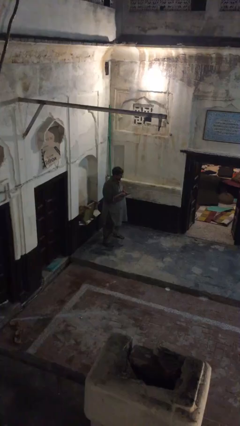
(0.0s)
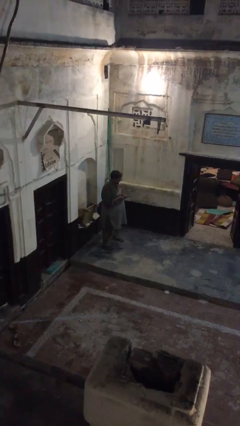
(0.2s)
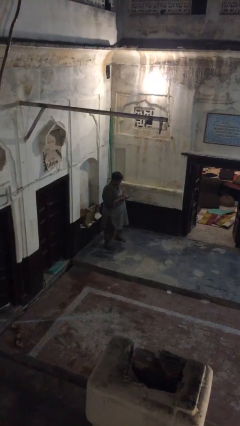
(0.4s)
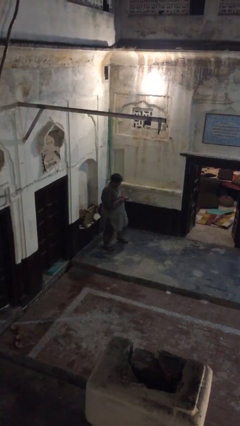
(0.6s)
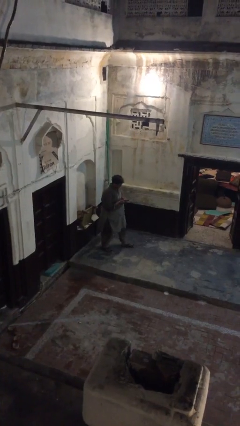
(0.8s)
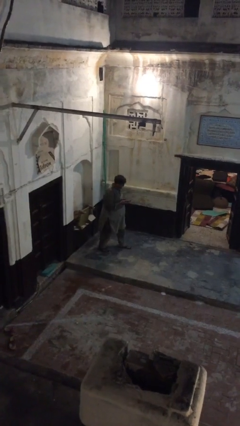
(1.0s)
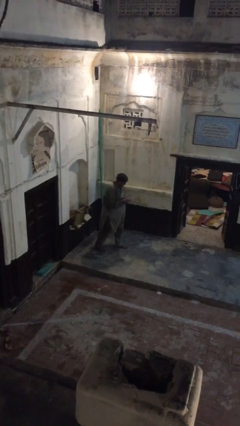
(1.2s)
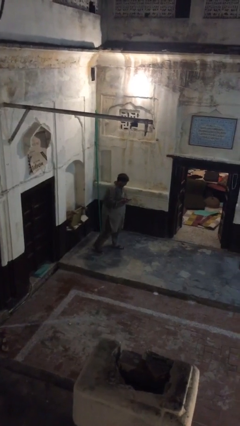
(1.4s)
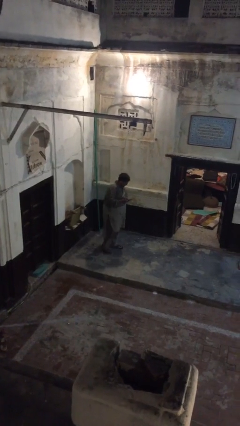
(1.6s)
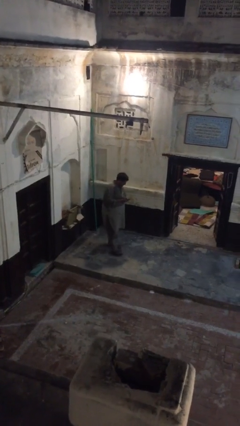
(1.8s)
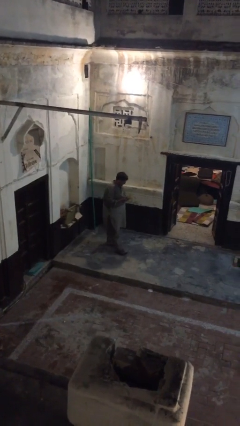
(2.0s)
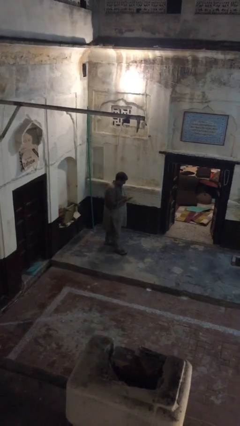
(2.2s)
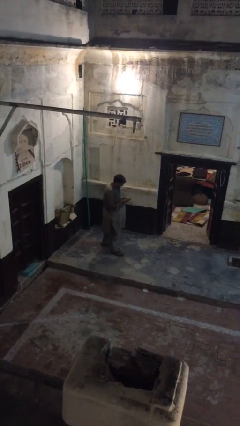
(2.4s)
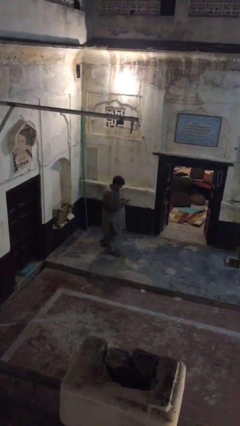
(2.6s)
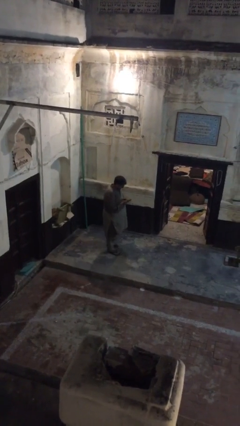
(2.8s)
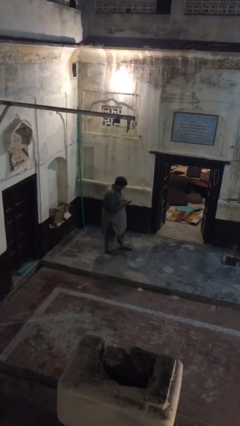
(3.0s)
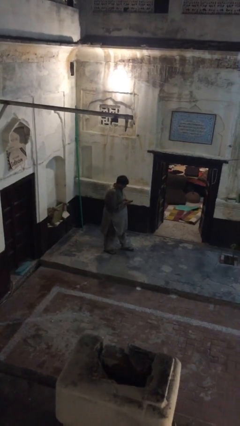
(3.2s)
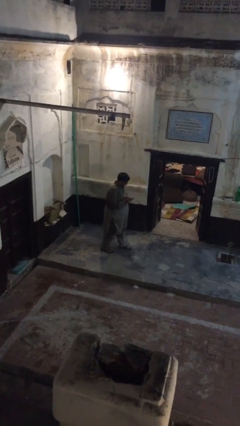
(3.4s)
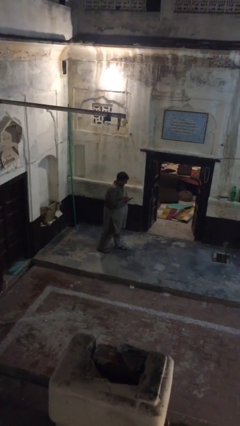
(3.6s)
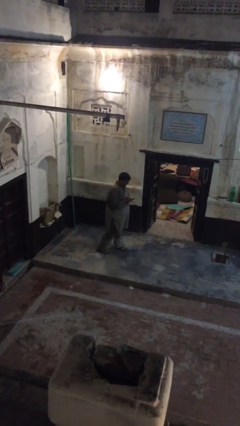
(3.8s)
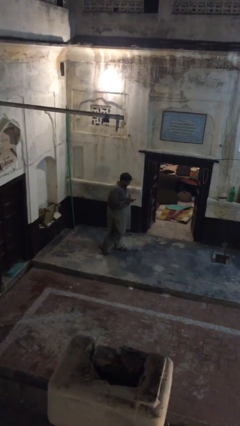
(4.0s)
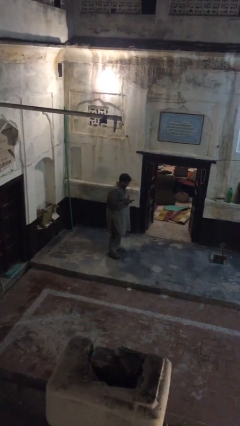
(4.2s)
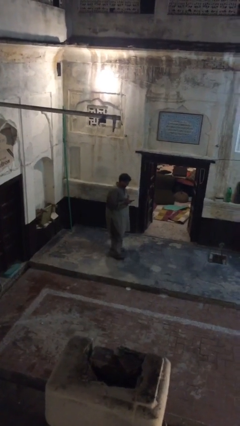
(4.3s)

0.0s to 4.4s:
person texts on phone

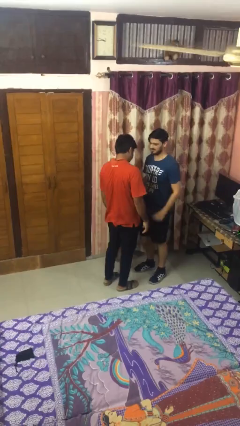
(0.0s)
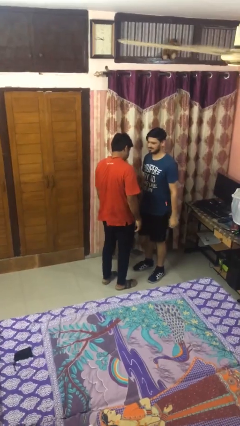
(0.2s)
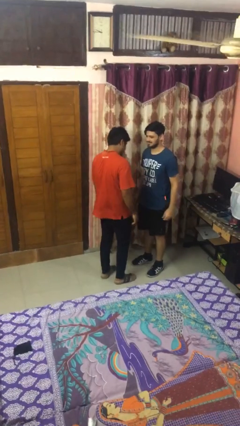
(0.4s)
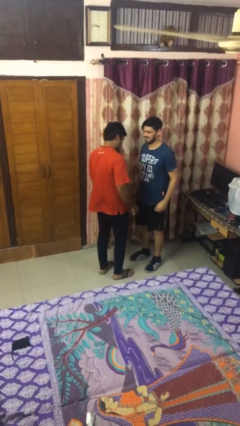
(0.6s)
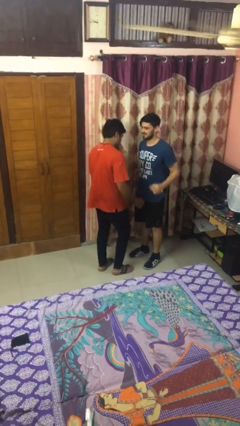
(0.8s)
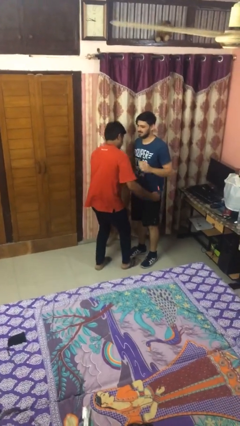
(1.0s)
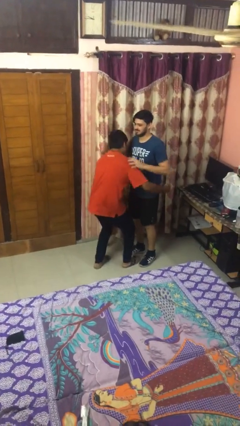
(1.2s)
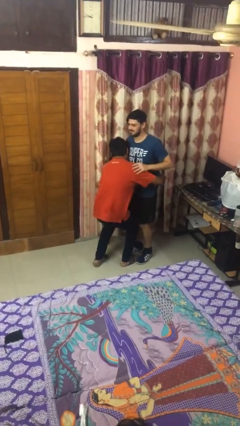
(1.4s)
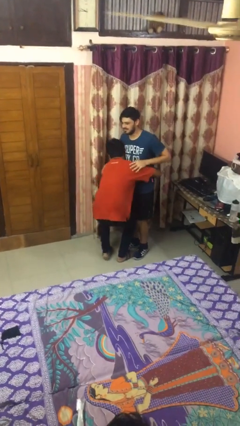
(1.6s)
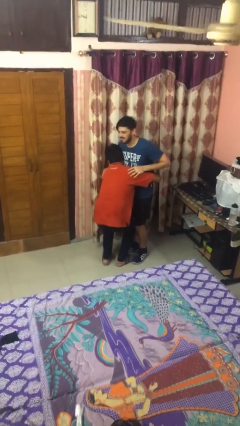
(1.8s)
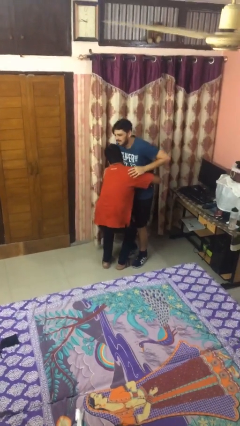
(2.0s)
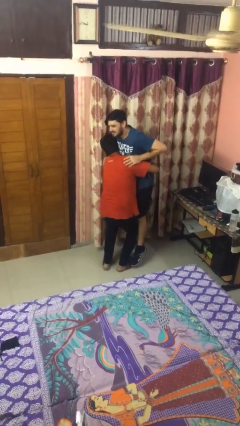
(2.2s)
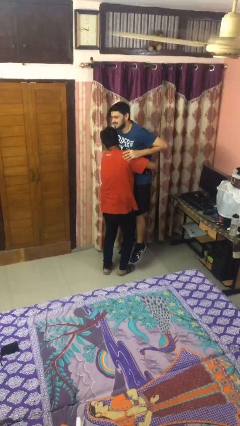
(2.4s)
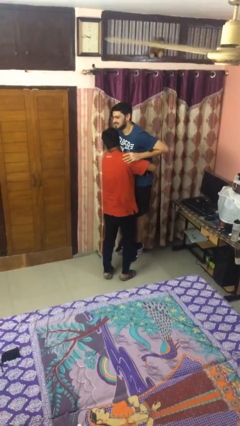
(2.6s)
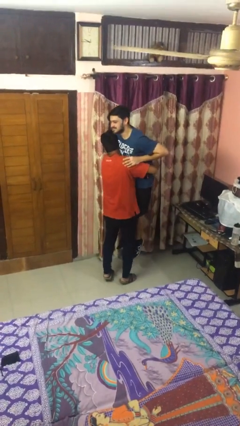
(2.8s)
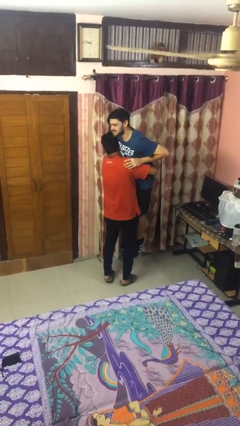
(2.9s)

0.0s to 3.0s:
person picks up person

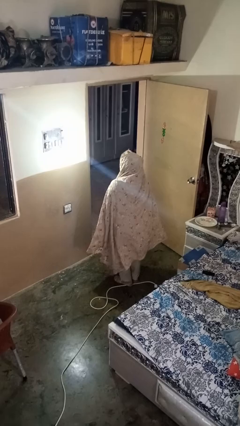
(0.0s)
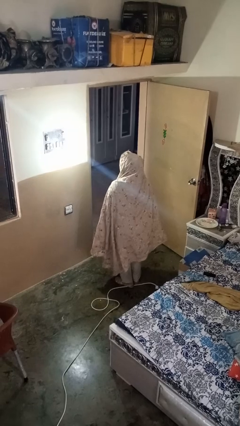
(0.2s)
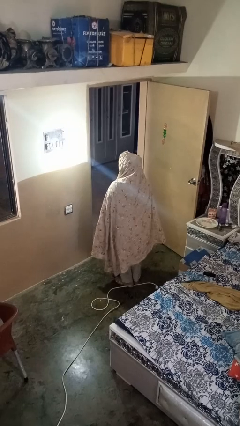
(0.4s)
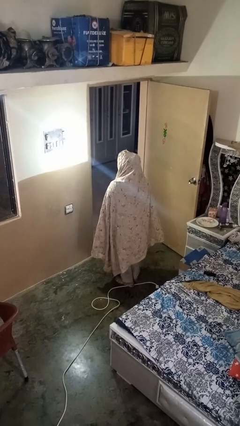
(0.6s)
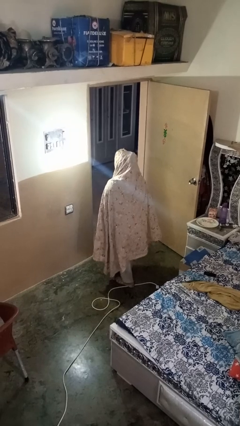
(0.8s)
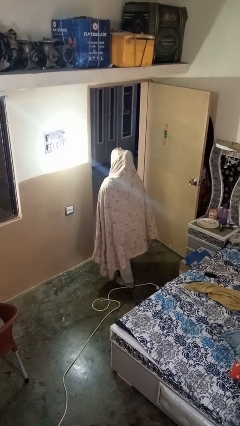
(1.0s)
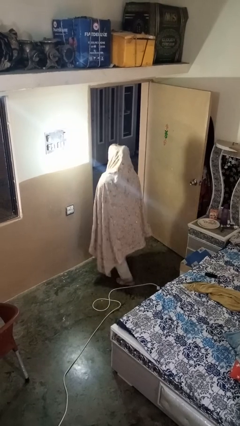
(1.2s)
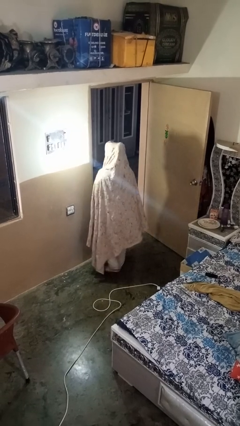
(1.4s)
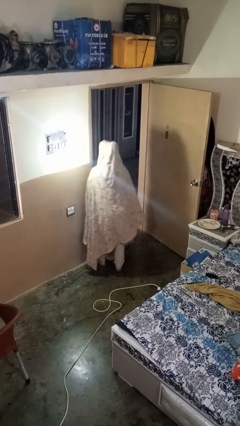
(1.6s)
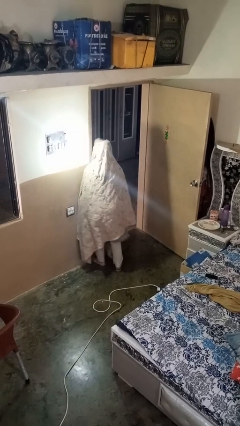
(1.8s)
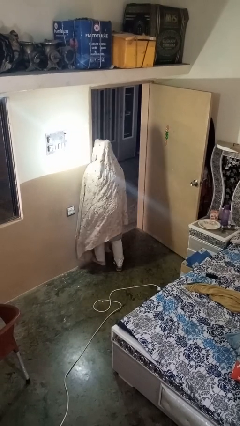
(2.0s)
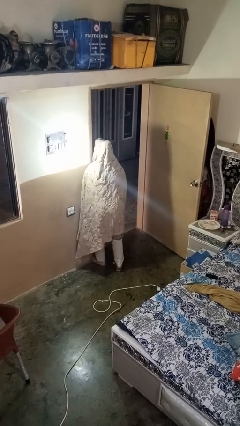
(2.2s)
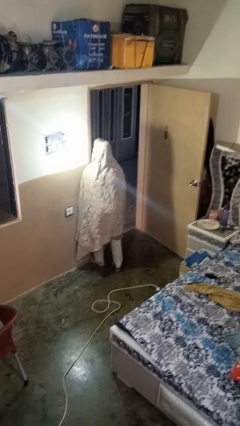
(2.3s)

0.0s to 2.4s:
person bumps into wall

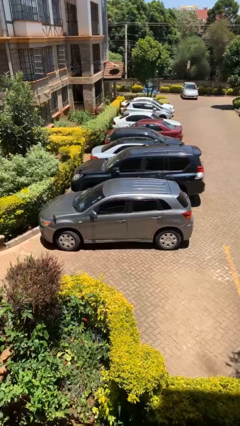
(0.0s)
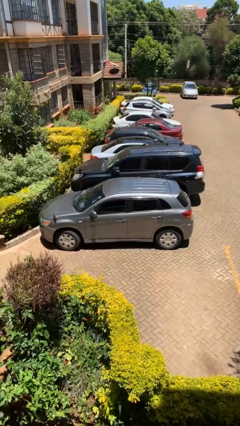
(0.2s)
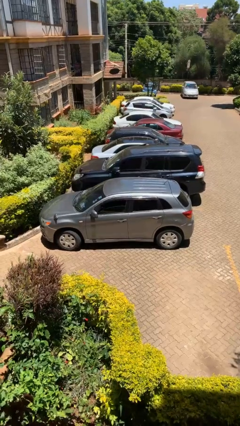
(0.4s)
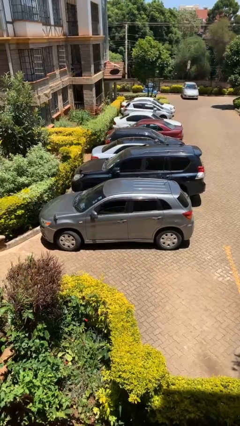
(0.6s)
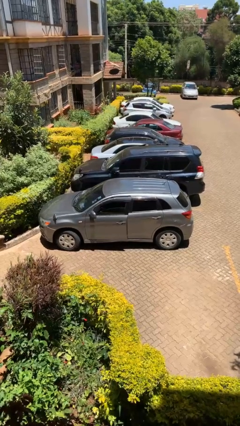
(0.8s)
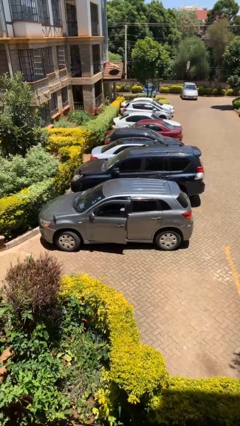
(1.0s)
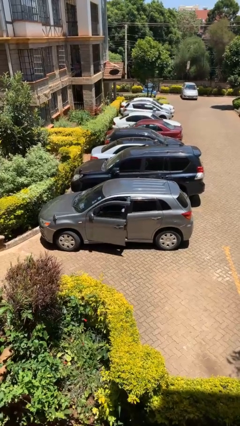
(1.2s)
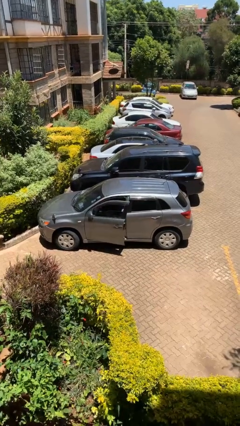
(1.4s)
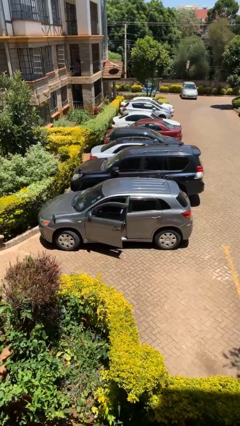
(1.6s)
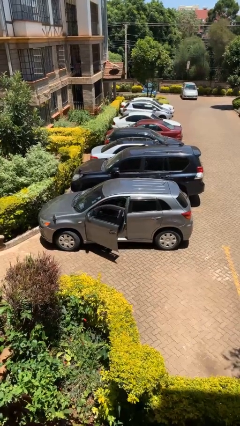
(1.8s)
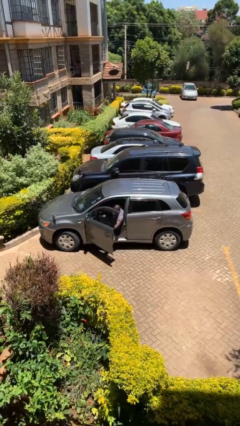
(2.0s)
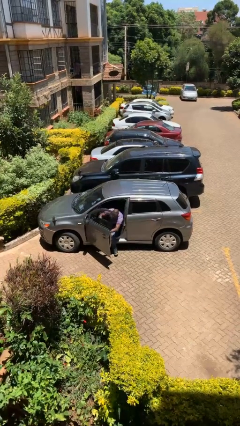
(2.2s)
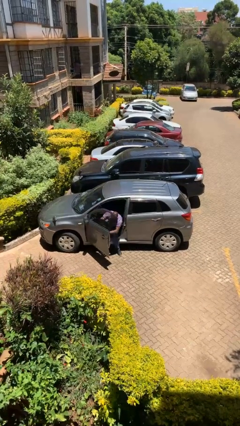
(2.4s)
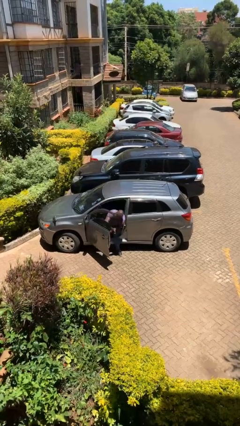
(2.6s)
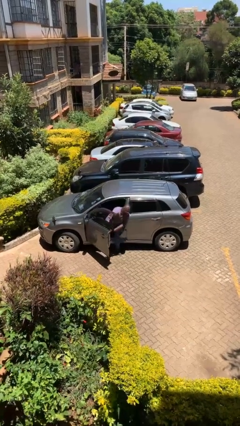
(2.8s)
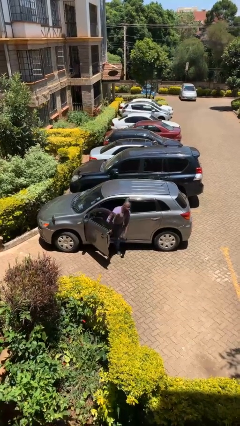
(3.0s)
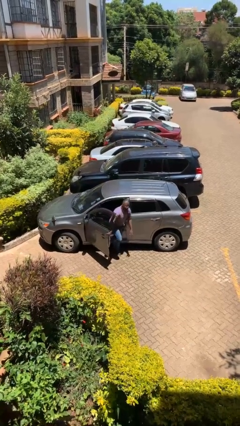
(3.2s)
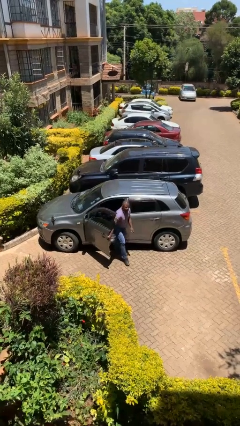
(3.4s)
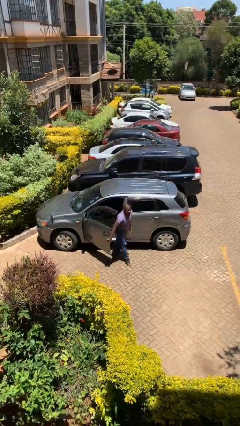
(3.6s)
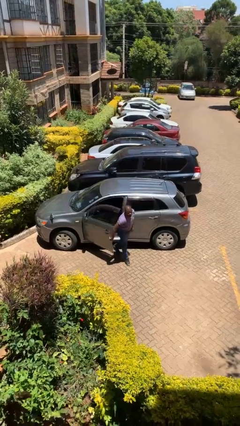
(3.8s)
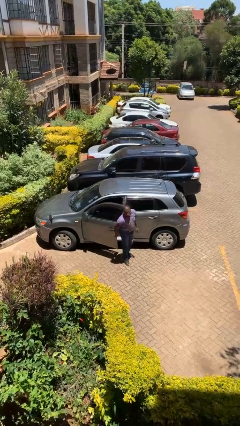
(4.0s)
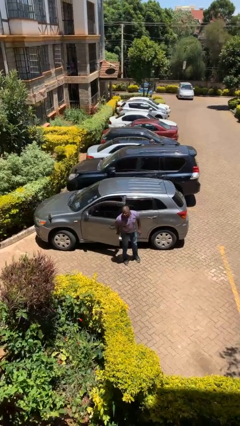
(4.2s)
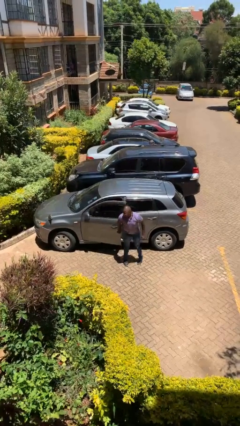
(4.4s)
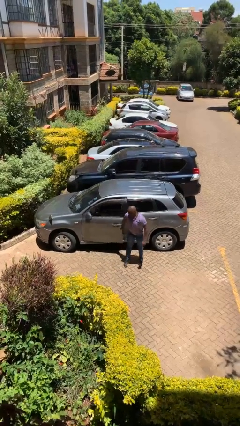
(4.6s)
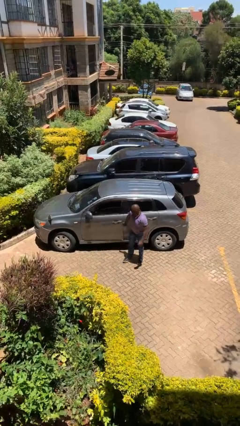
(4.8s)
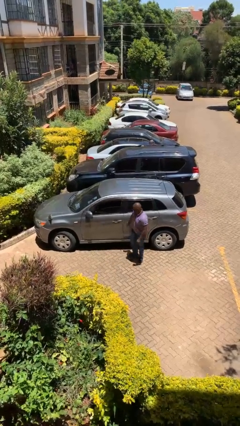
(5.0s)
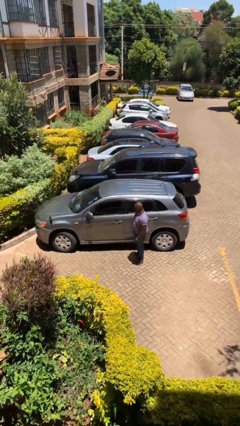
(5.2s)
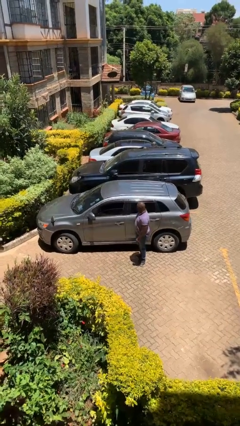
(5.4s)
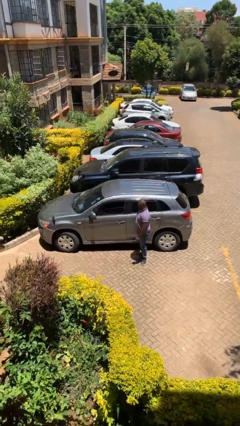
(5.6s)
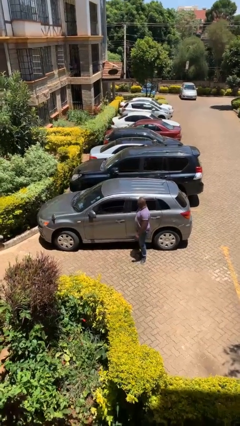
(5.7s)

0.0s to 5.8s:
car drops off person

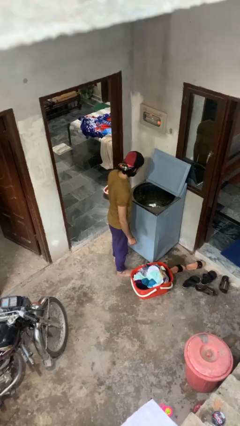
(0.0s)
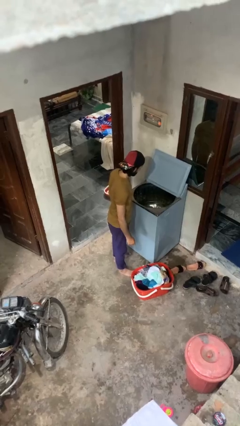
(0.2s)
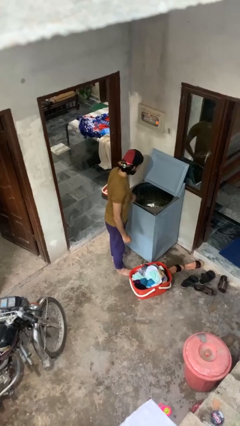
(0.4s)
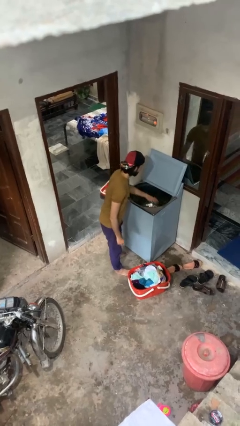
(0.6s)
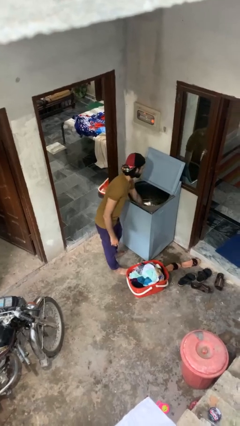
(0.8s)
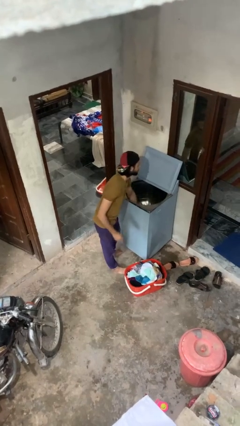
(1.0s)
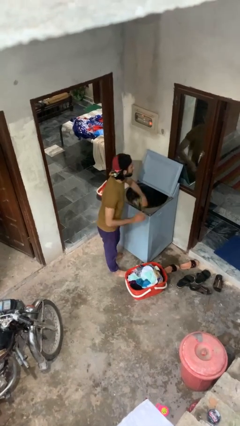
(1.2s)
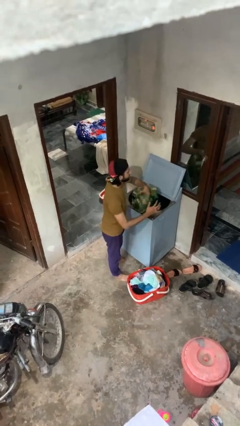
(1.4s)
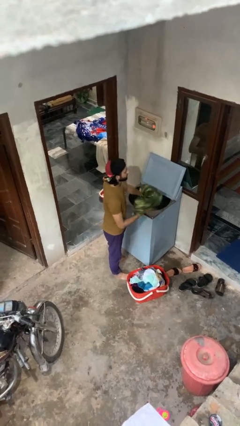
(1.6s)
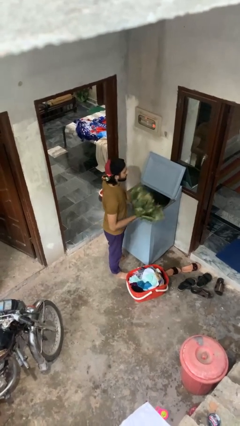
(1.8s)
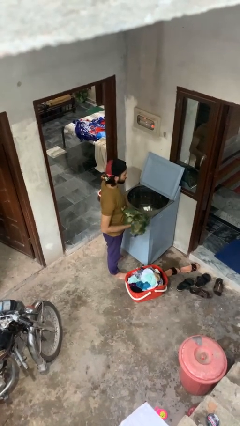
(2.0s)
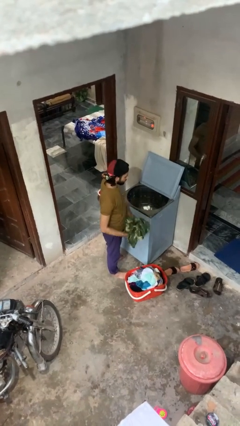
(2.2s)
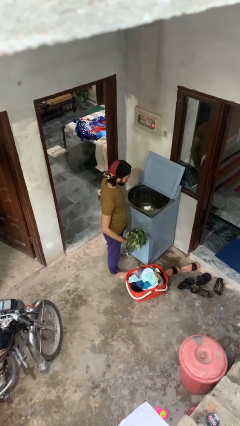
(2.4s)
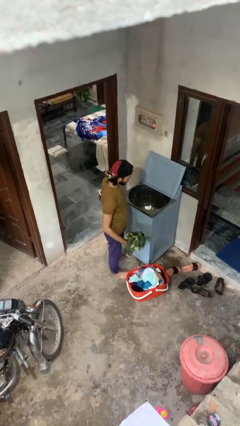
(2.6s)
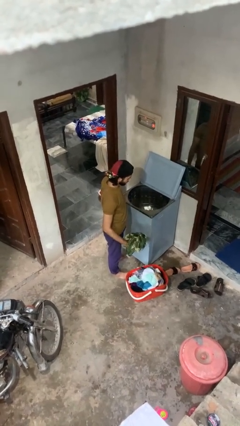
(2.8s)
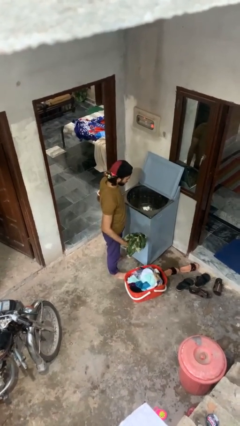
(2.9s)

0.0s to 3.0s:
person unloads clotheswasher
